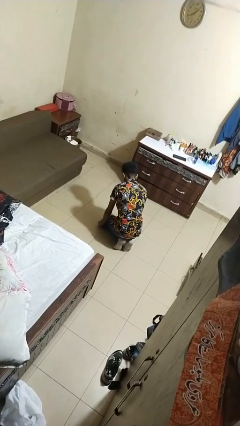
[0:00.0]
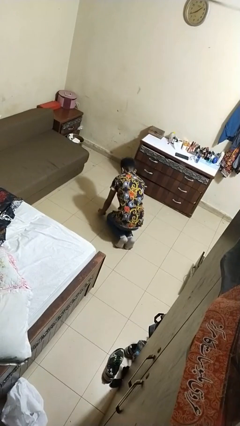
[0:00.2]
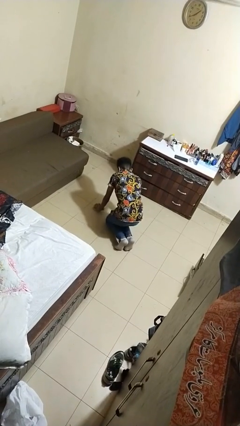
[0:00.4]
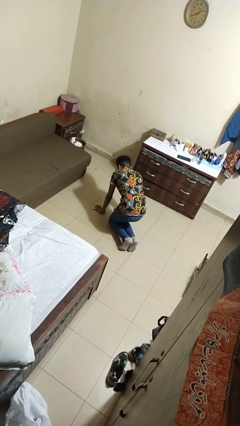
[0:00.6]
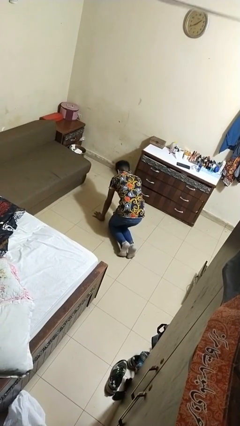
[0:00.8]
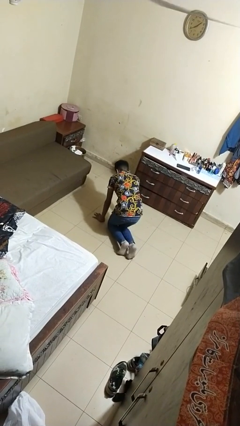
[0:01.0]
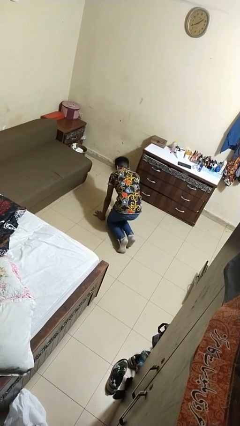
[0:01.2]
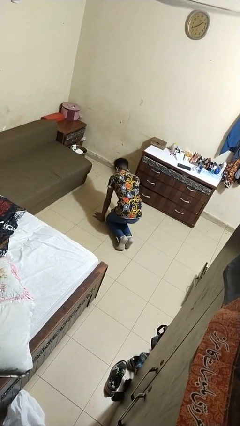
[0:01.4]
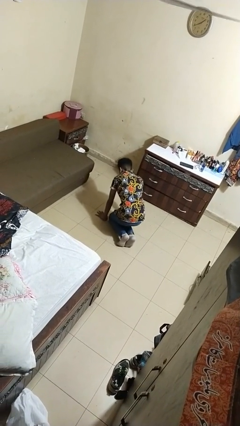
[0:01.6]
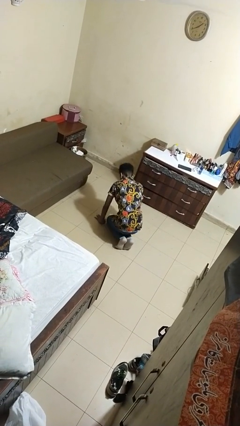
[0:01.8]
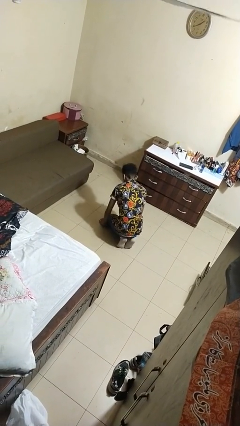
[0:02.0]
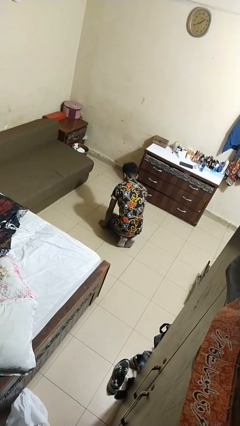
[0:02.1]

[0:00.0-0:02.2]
person crawls

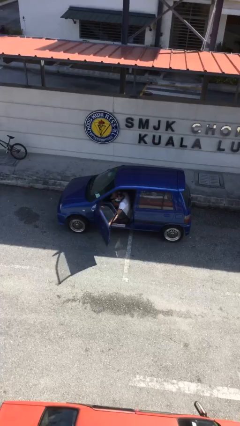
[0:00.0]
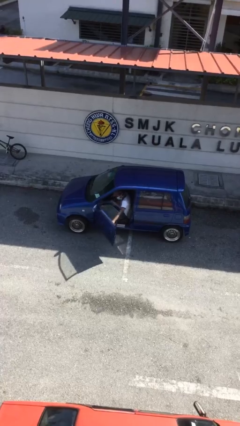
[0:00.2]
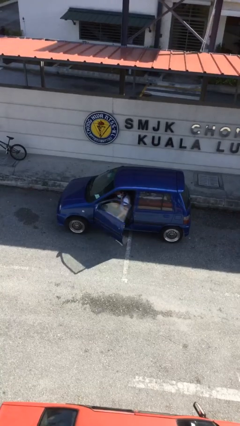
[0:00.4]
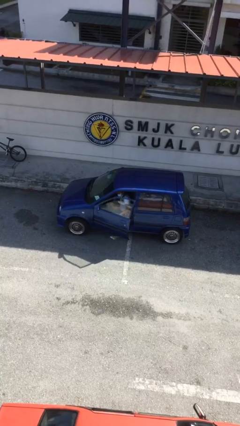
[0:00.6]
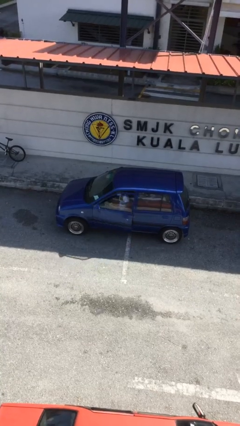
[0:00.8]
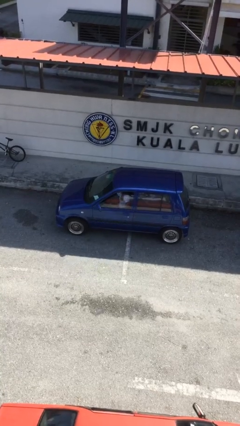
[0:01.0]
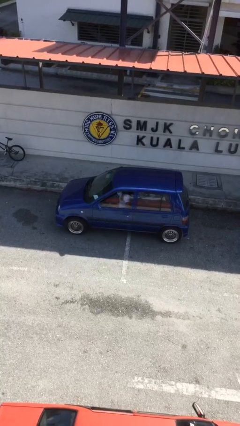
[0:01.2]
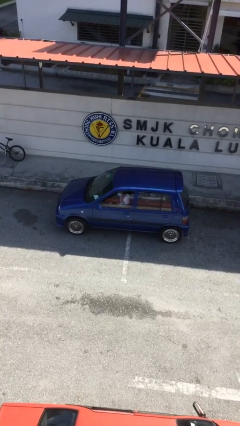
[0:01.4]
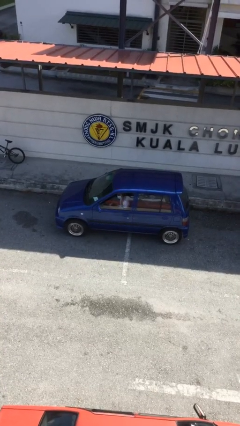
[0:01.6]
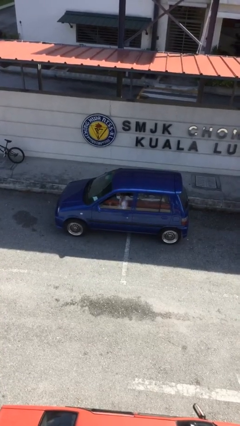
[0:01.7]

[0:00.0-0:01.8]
person closes car door

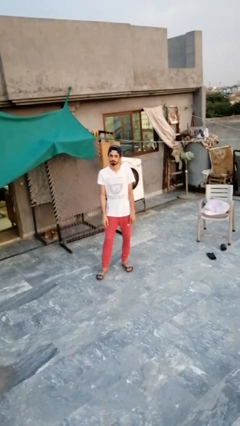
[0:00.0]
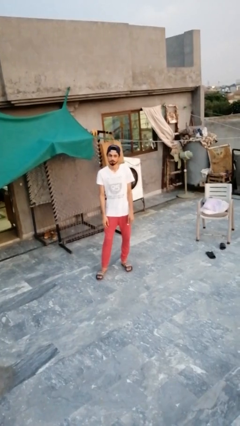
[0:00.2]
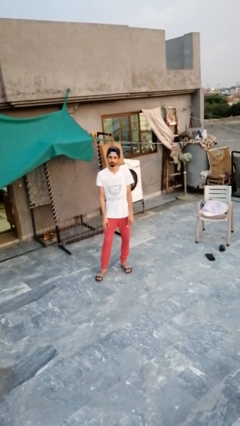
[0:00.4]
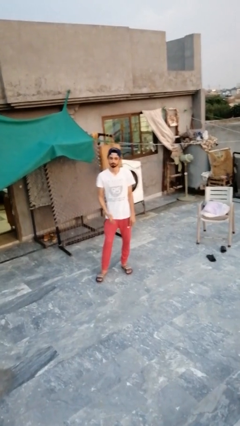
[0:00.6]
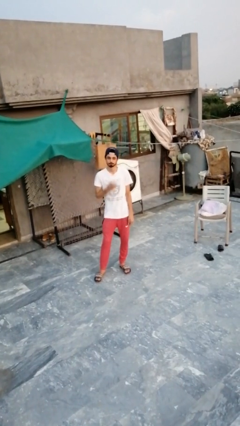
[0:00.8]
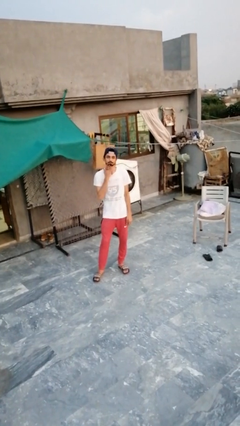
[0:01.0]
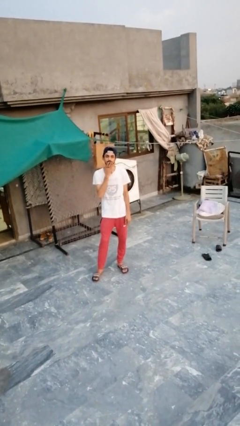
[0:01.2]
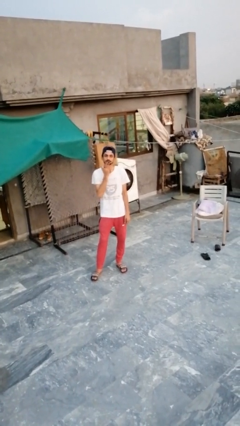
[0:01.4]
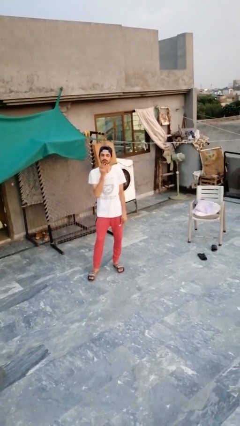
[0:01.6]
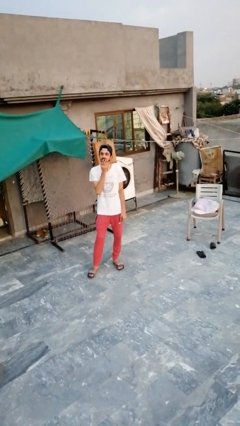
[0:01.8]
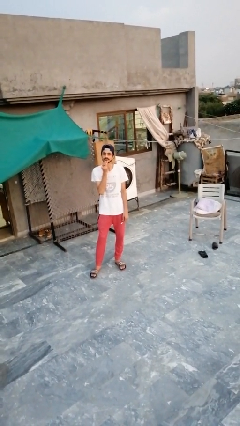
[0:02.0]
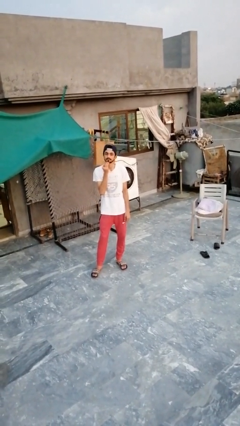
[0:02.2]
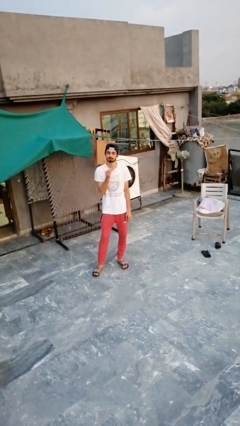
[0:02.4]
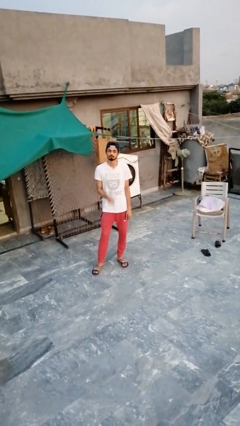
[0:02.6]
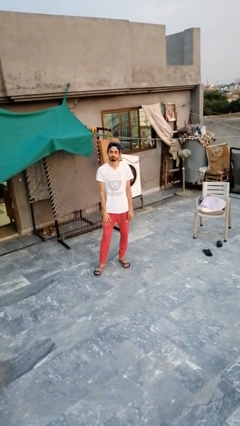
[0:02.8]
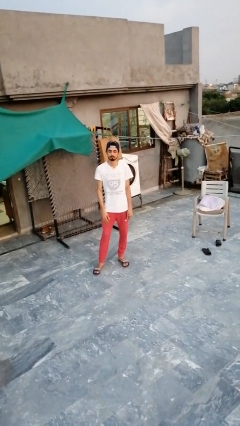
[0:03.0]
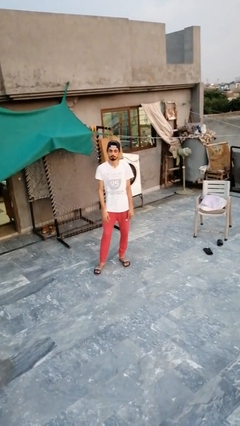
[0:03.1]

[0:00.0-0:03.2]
person strokes chin

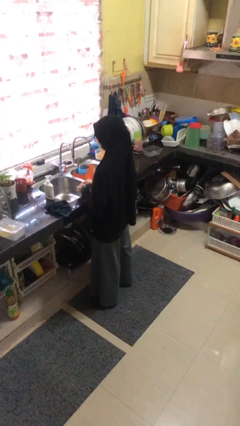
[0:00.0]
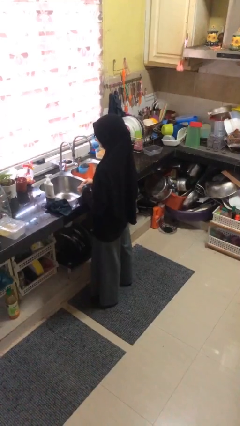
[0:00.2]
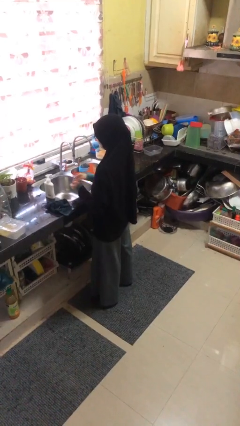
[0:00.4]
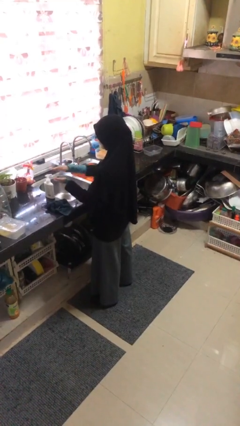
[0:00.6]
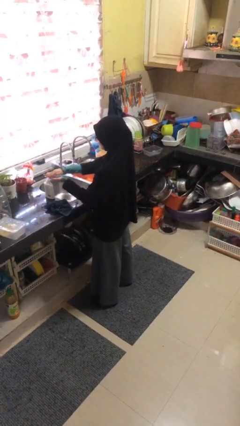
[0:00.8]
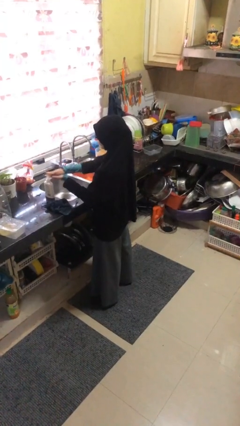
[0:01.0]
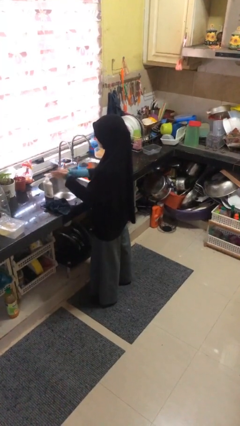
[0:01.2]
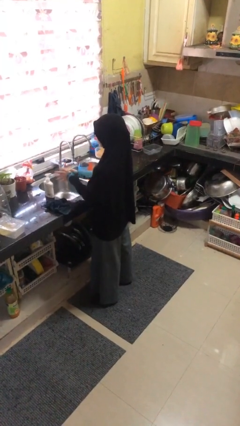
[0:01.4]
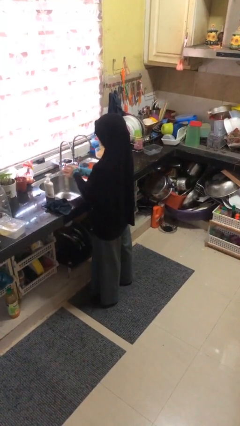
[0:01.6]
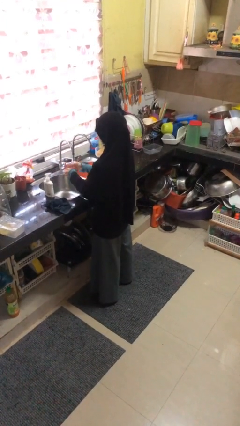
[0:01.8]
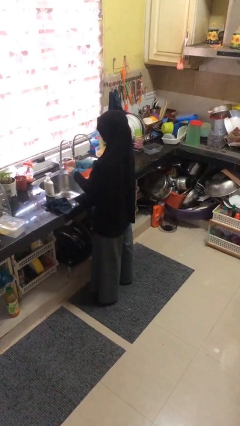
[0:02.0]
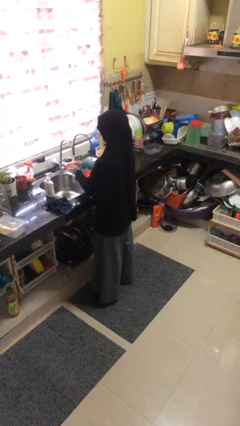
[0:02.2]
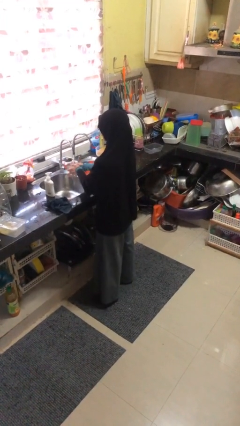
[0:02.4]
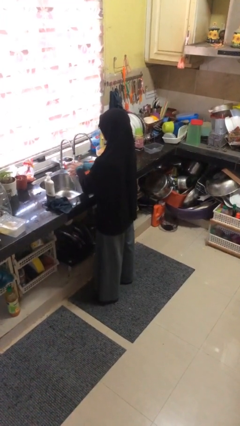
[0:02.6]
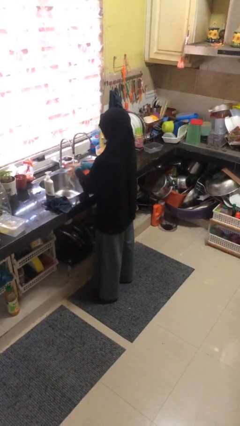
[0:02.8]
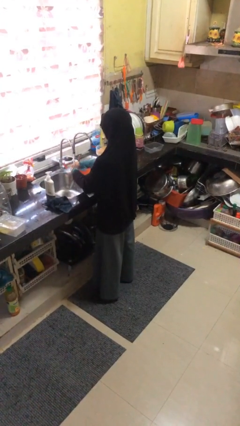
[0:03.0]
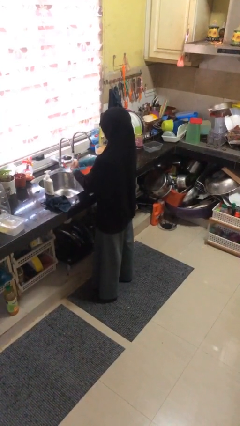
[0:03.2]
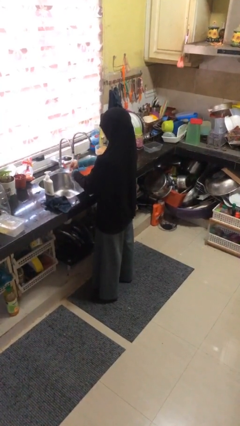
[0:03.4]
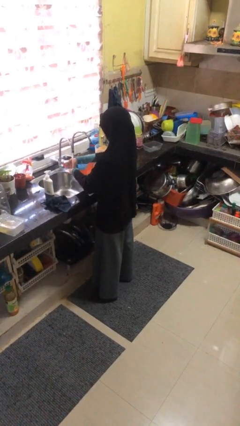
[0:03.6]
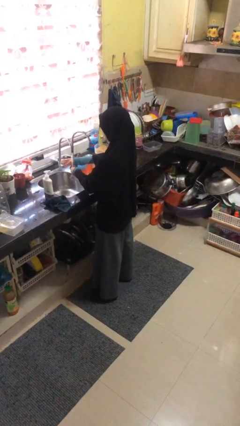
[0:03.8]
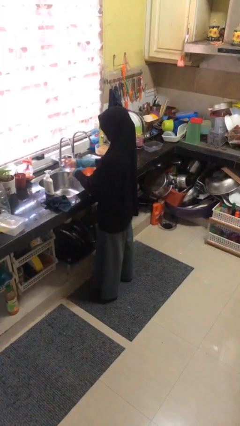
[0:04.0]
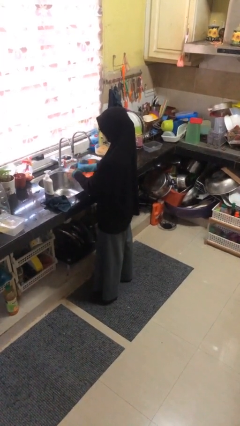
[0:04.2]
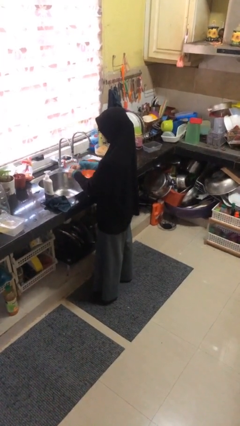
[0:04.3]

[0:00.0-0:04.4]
person washes hands

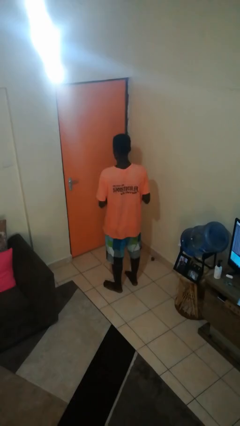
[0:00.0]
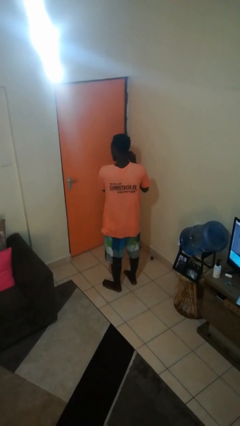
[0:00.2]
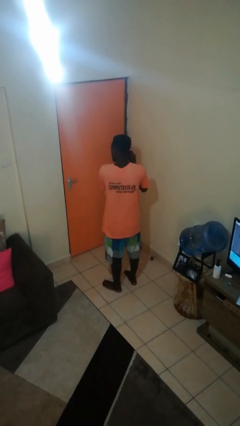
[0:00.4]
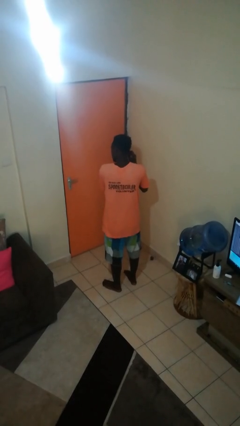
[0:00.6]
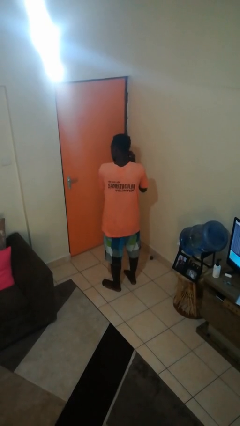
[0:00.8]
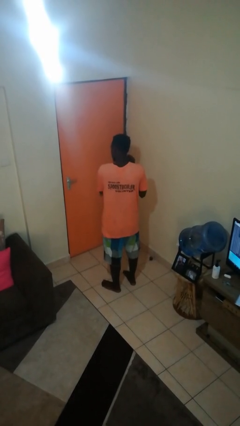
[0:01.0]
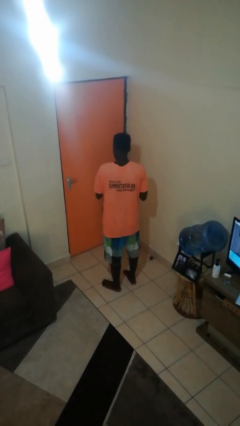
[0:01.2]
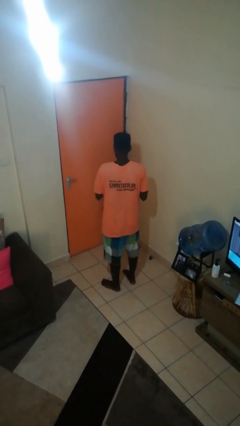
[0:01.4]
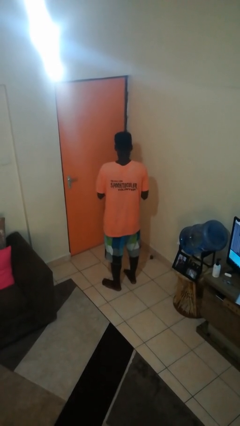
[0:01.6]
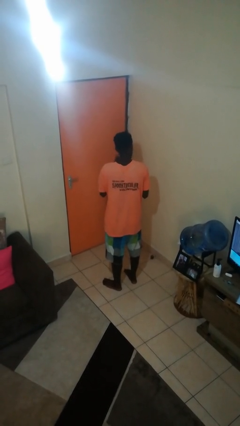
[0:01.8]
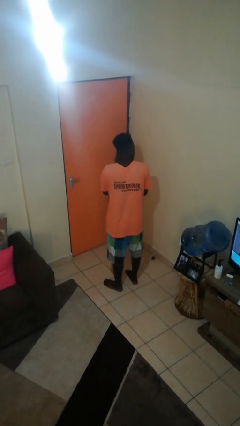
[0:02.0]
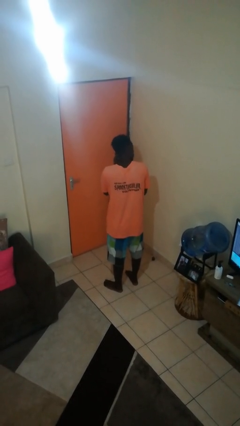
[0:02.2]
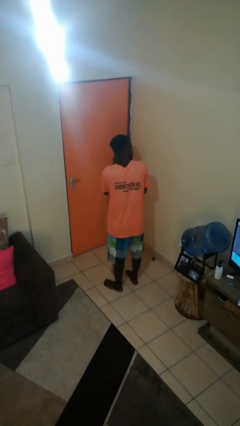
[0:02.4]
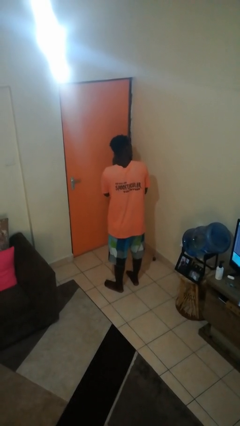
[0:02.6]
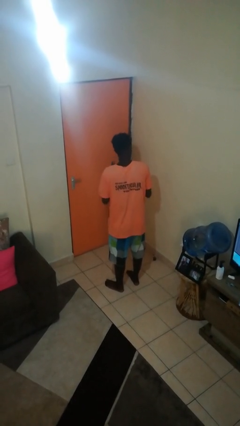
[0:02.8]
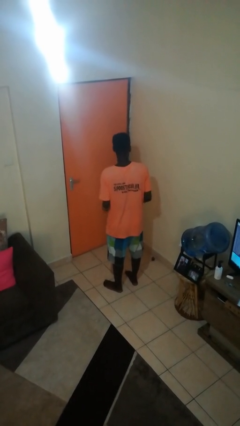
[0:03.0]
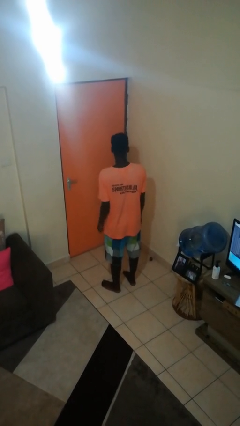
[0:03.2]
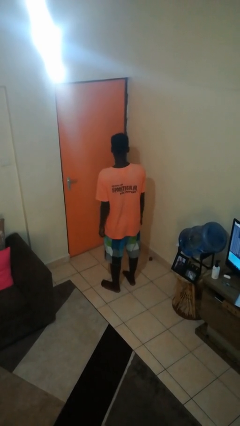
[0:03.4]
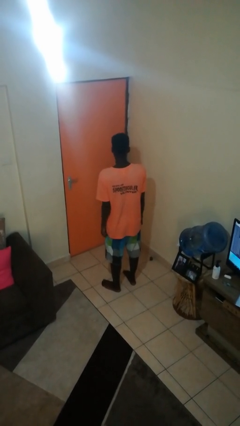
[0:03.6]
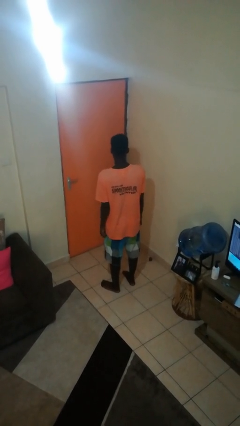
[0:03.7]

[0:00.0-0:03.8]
person puts on earrings

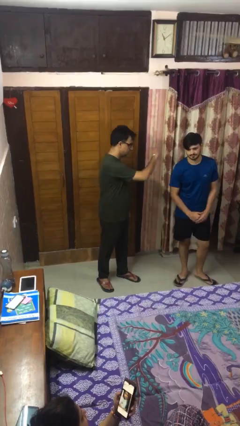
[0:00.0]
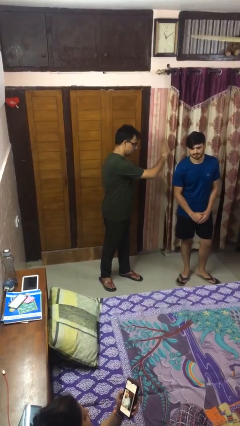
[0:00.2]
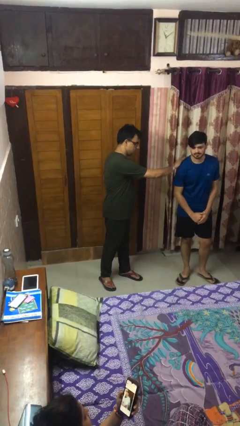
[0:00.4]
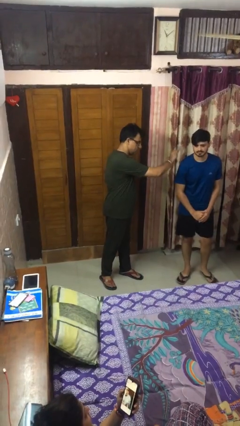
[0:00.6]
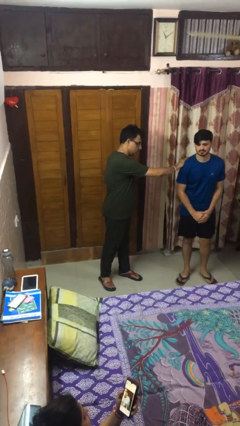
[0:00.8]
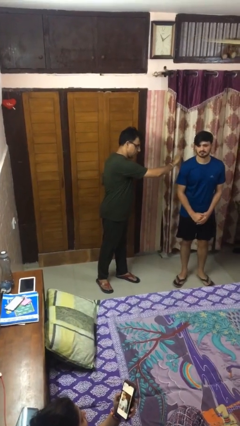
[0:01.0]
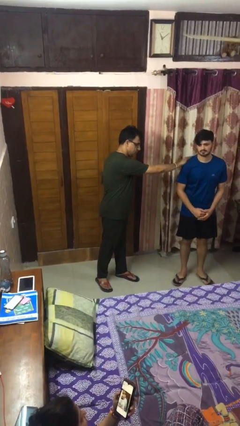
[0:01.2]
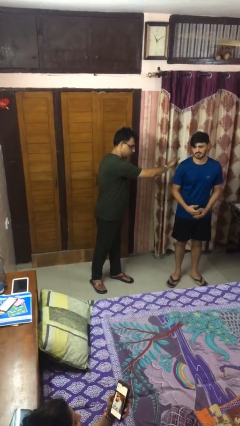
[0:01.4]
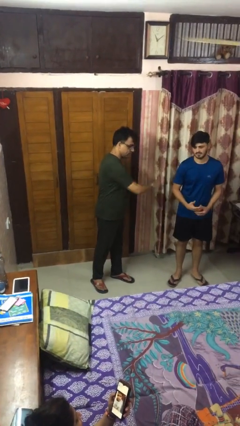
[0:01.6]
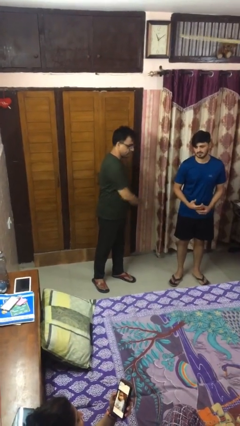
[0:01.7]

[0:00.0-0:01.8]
person pounds shoulders of person

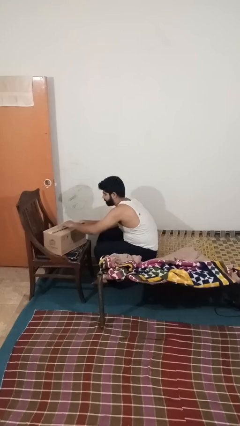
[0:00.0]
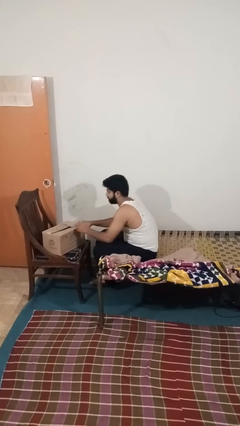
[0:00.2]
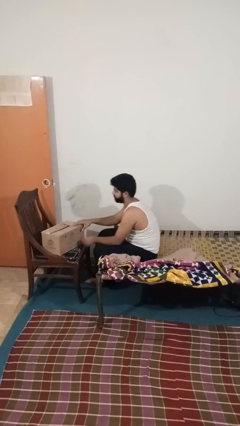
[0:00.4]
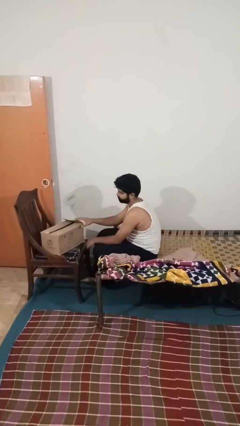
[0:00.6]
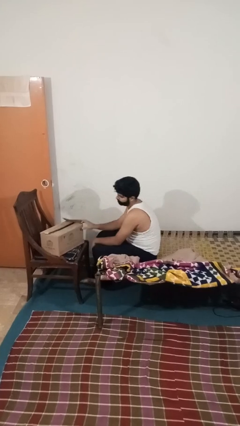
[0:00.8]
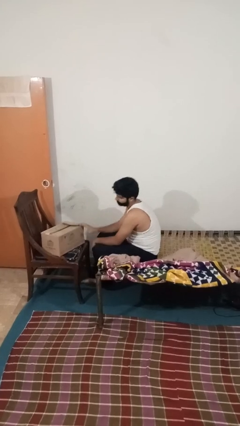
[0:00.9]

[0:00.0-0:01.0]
person closes box
